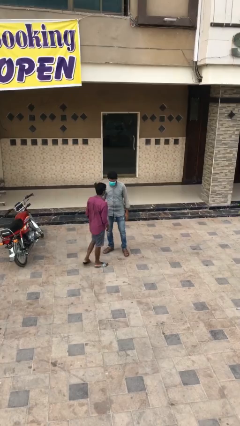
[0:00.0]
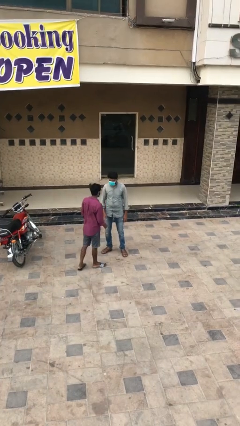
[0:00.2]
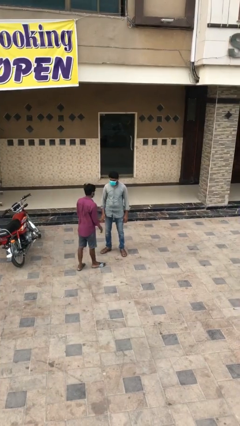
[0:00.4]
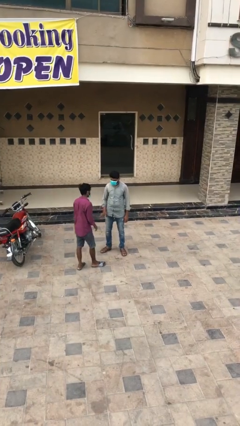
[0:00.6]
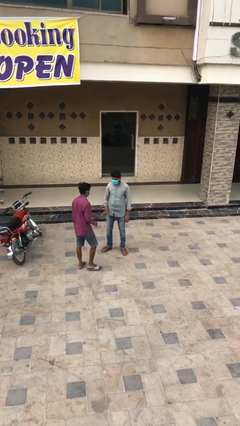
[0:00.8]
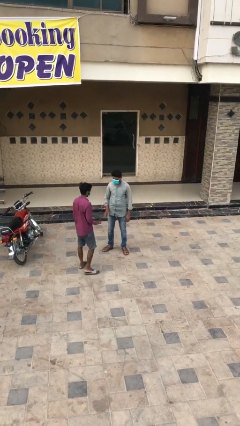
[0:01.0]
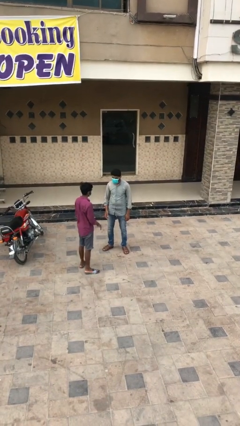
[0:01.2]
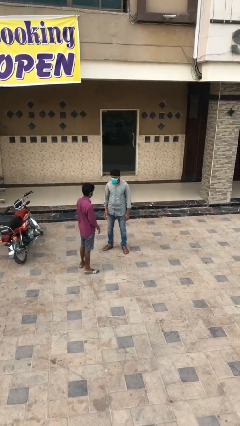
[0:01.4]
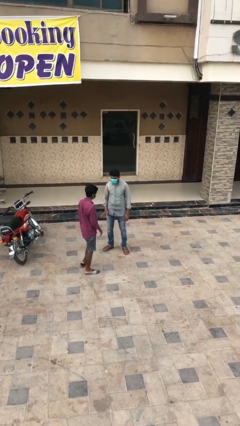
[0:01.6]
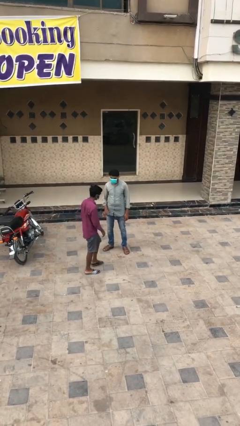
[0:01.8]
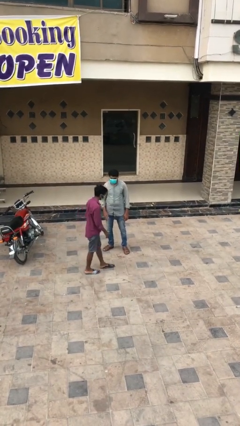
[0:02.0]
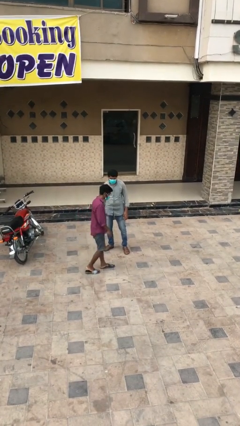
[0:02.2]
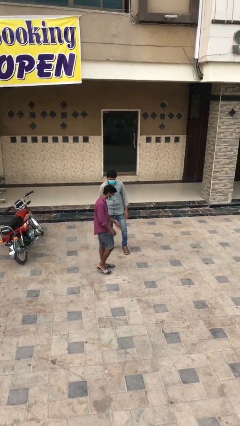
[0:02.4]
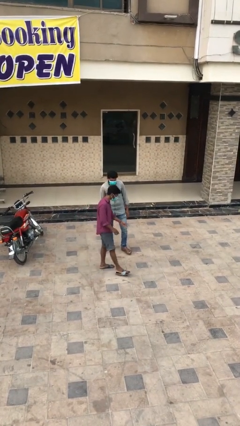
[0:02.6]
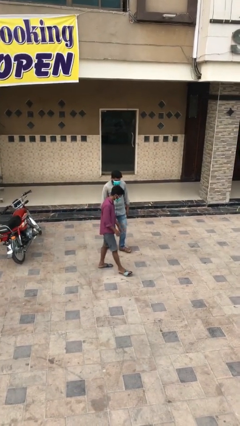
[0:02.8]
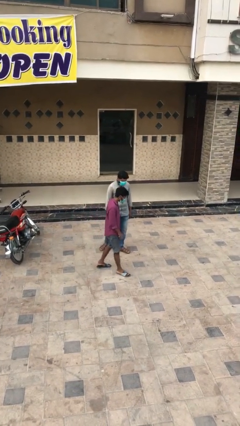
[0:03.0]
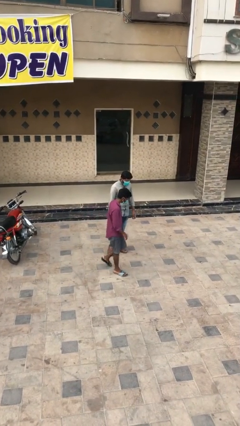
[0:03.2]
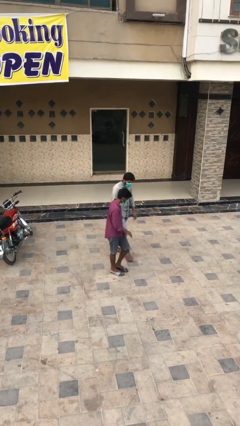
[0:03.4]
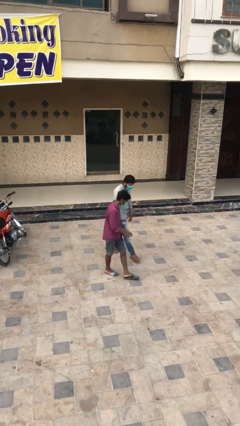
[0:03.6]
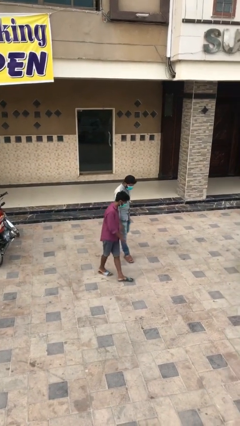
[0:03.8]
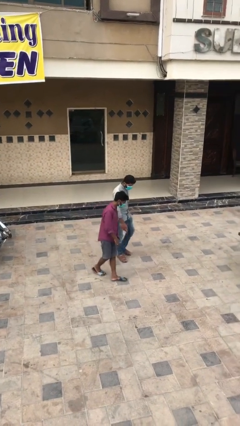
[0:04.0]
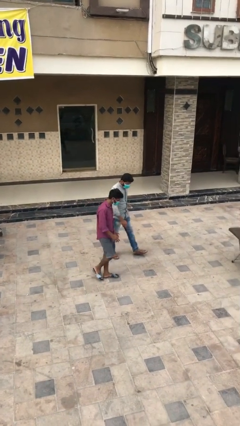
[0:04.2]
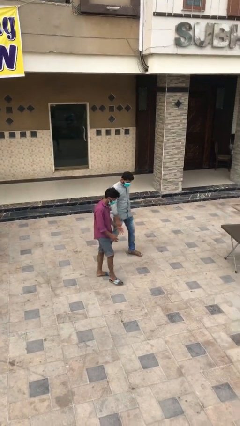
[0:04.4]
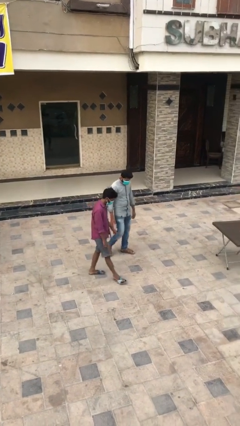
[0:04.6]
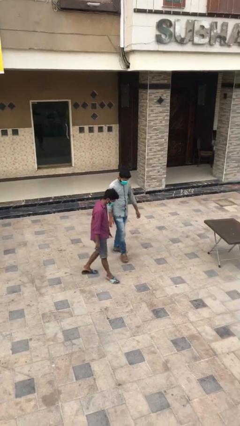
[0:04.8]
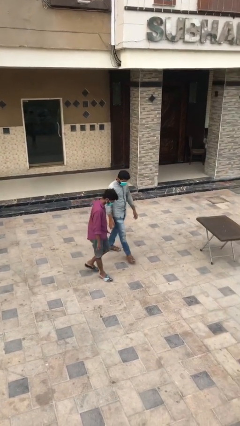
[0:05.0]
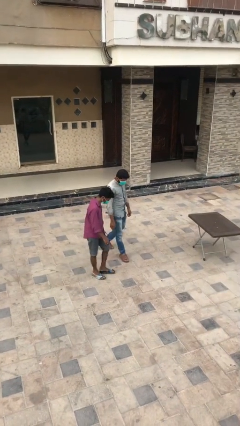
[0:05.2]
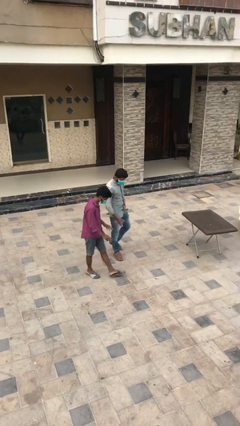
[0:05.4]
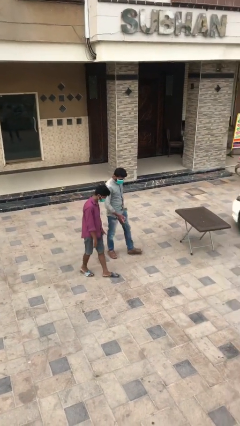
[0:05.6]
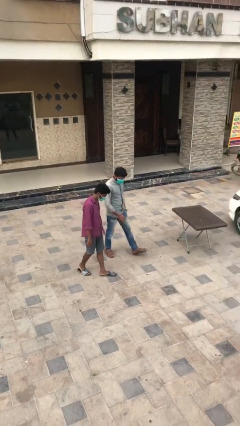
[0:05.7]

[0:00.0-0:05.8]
person talks to person

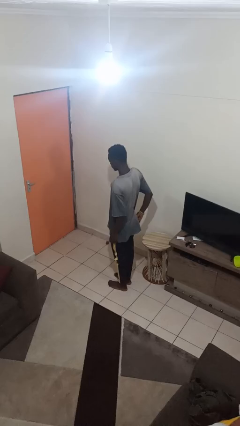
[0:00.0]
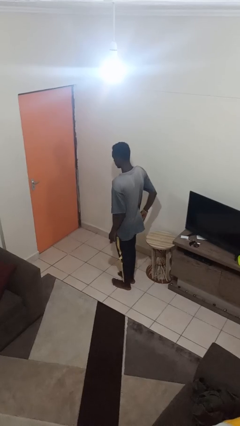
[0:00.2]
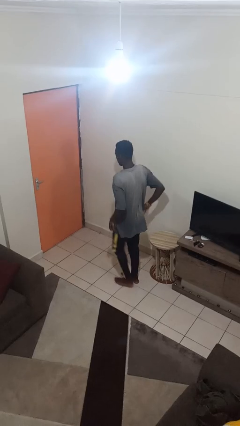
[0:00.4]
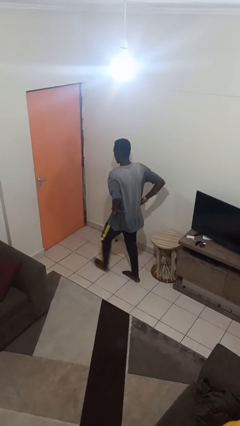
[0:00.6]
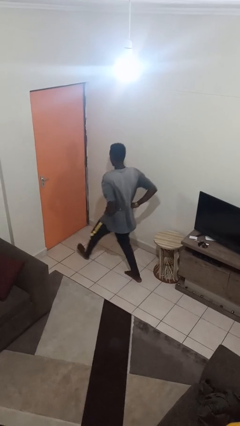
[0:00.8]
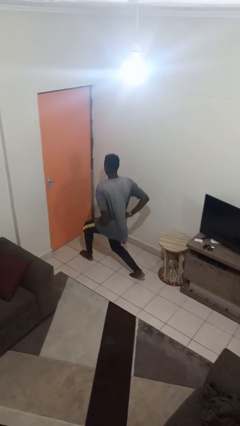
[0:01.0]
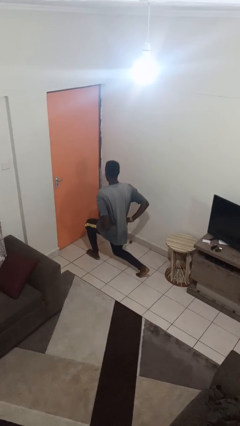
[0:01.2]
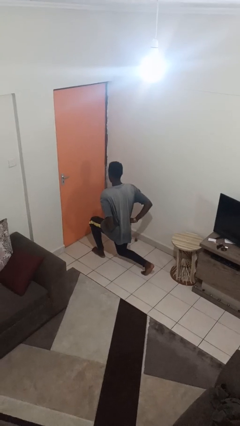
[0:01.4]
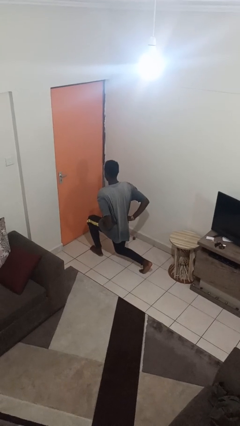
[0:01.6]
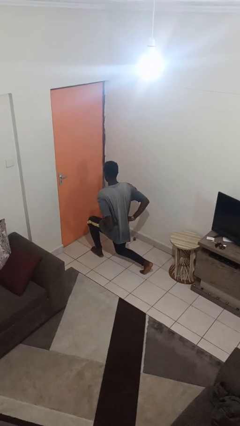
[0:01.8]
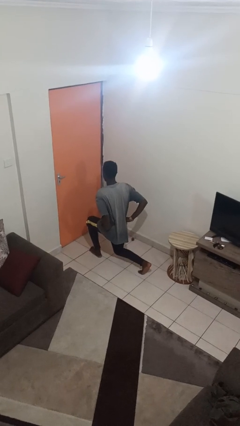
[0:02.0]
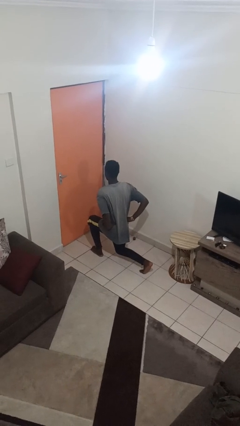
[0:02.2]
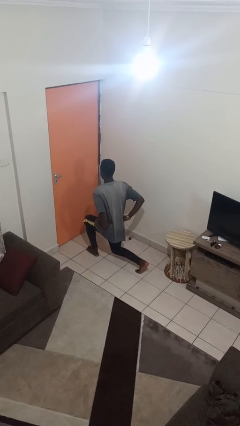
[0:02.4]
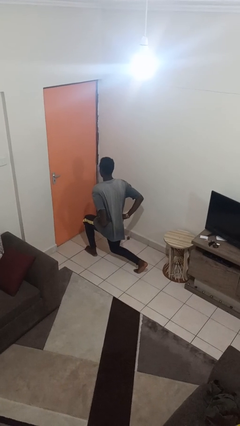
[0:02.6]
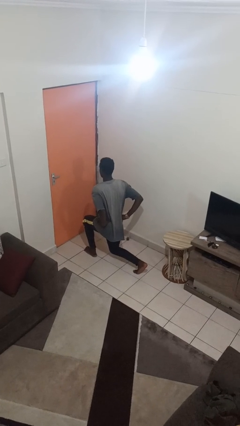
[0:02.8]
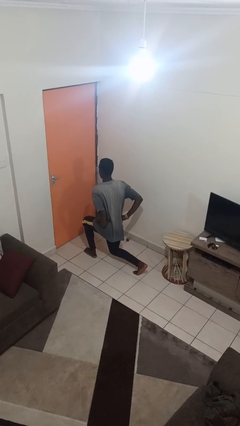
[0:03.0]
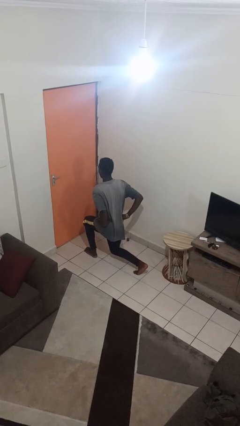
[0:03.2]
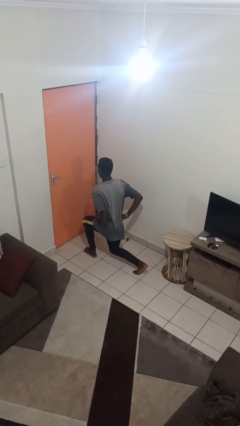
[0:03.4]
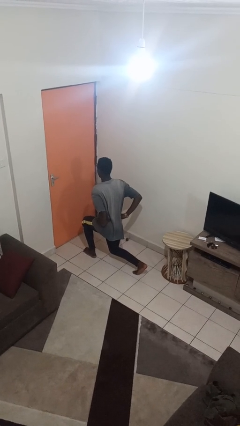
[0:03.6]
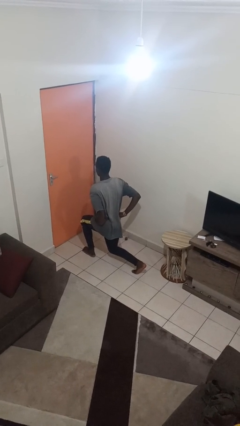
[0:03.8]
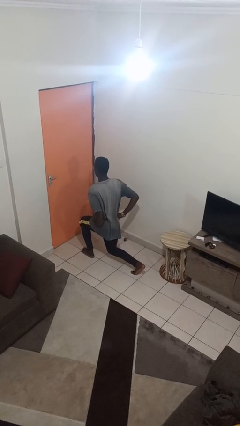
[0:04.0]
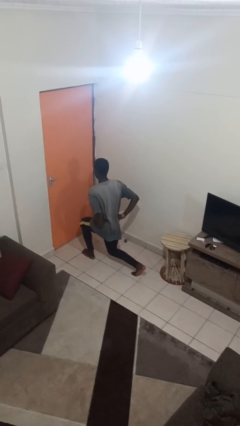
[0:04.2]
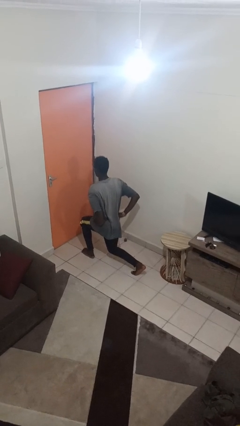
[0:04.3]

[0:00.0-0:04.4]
person exercises with lunges

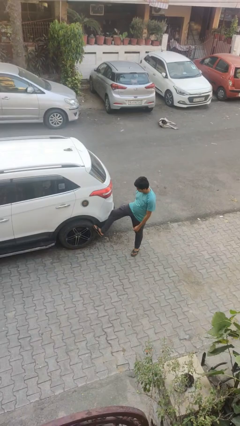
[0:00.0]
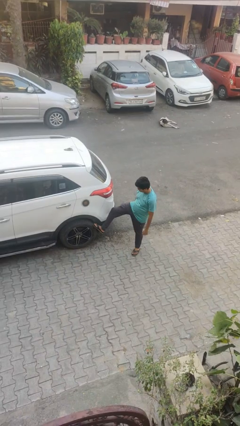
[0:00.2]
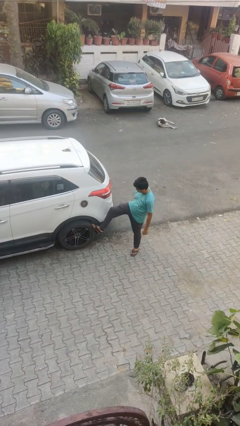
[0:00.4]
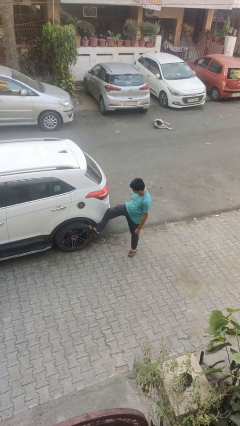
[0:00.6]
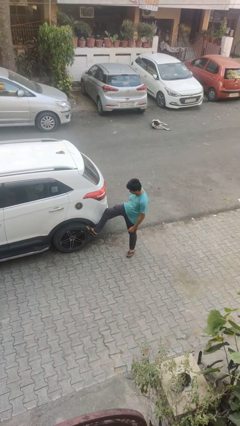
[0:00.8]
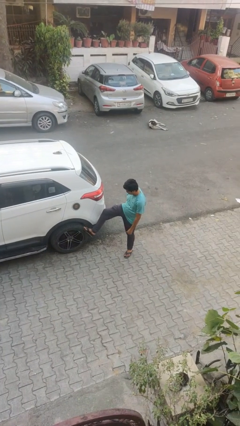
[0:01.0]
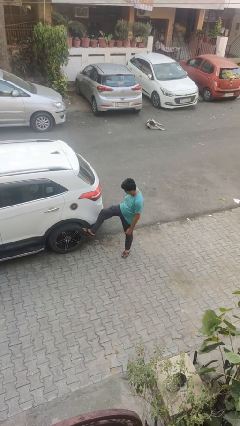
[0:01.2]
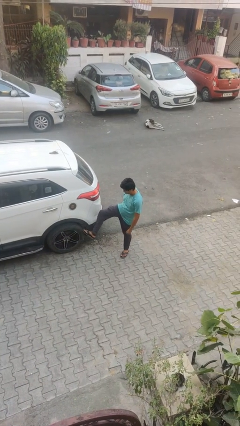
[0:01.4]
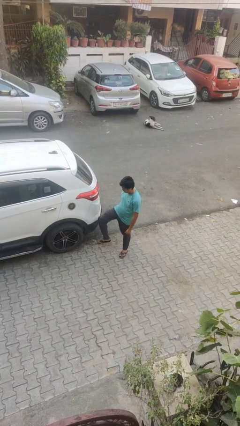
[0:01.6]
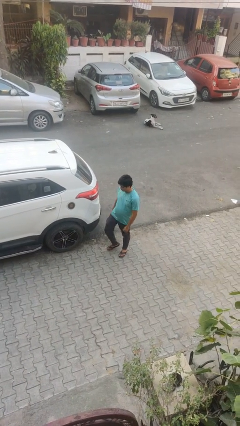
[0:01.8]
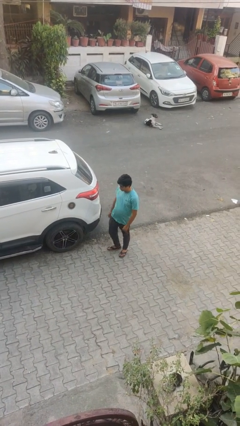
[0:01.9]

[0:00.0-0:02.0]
person kicks car tires

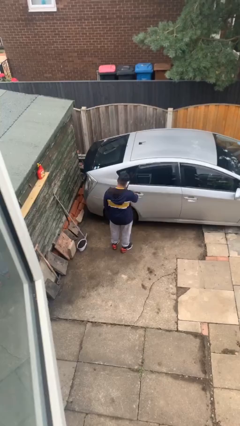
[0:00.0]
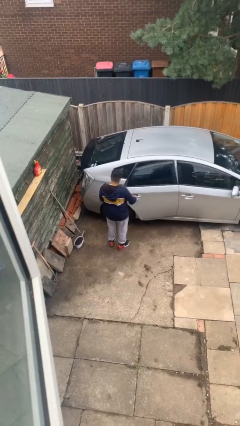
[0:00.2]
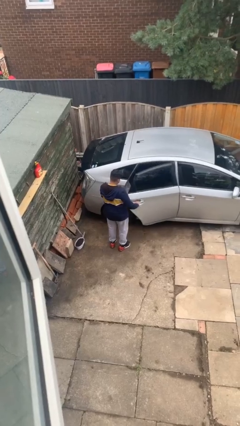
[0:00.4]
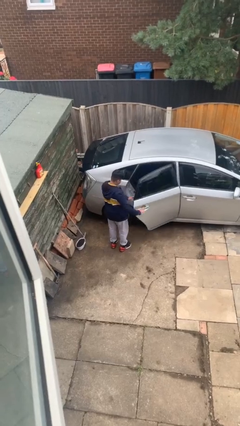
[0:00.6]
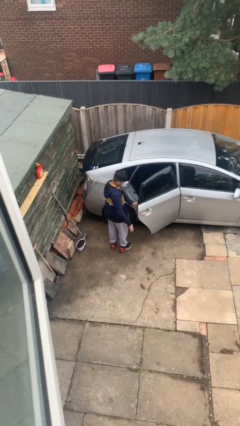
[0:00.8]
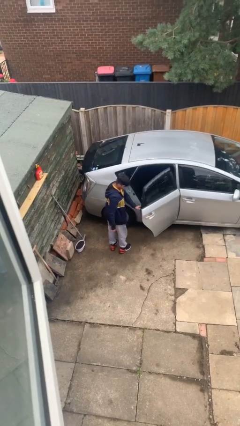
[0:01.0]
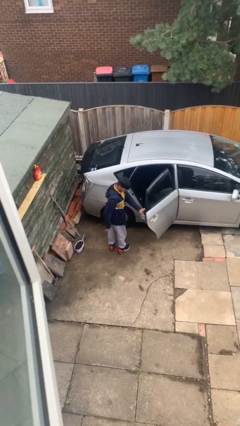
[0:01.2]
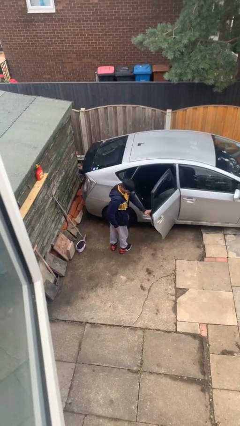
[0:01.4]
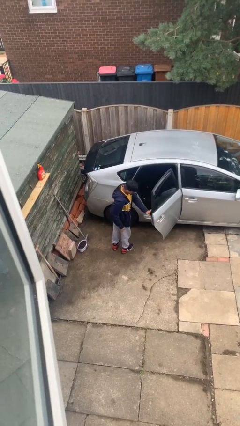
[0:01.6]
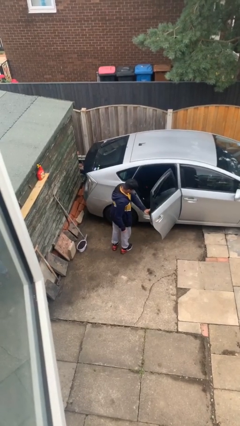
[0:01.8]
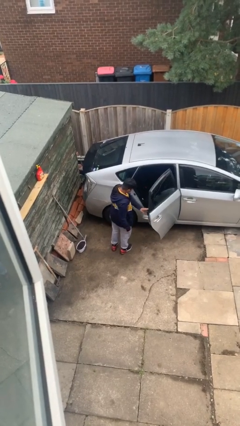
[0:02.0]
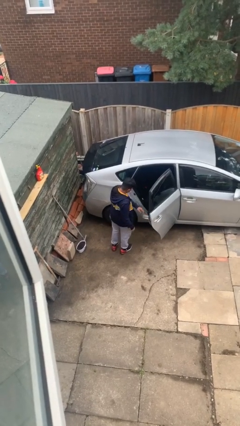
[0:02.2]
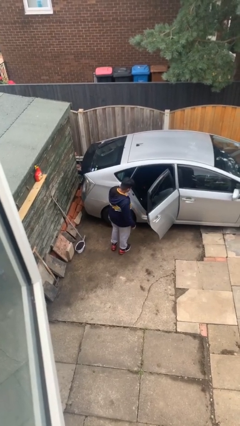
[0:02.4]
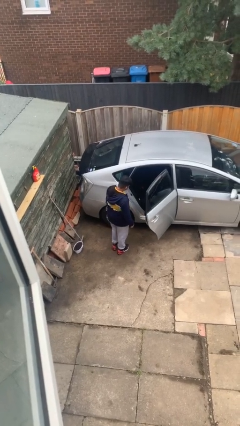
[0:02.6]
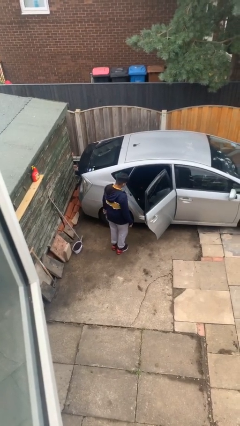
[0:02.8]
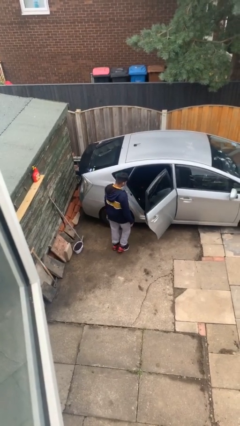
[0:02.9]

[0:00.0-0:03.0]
person opens car door

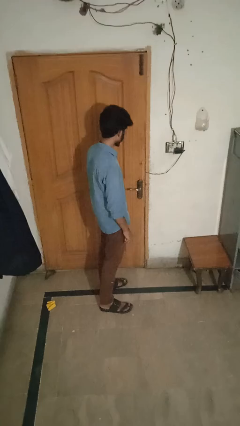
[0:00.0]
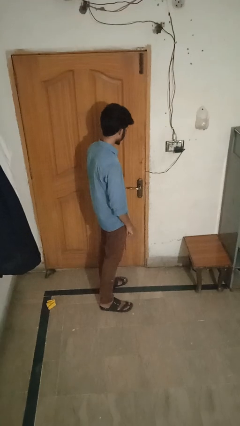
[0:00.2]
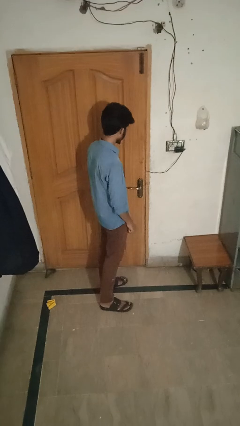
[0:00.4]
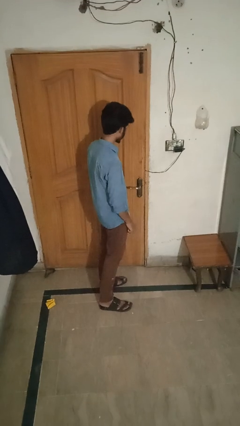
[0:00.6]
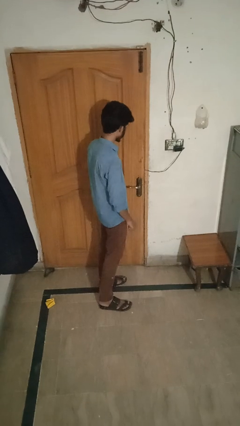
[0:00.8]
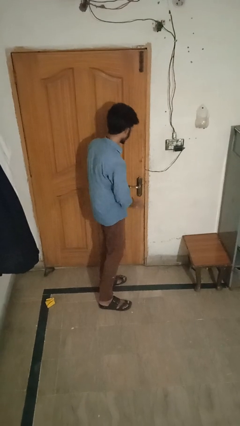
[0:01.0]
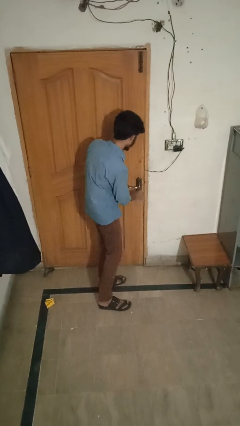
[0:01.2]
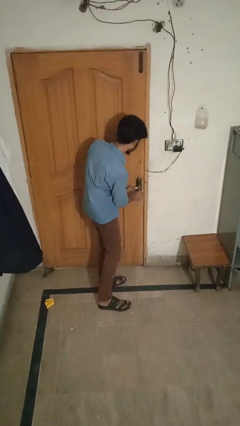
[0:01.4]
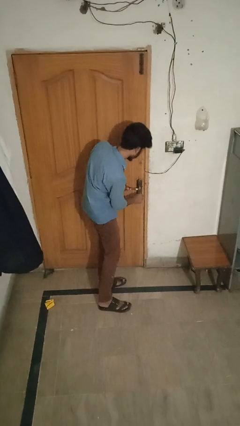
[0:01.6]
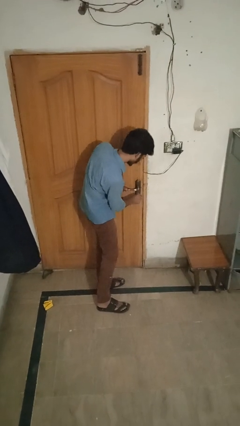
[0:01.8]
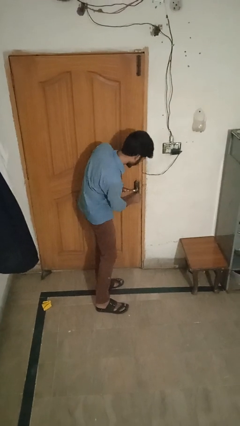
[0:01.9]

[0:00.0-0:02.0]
person locks door with keys
